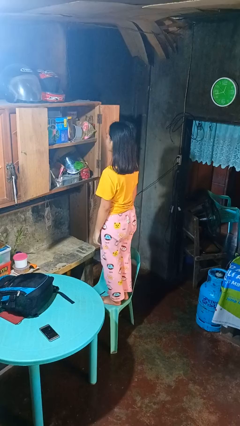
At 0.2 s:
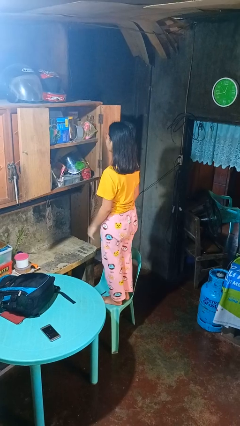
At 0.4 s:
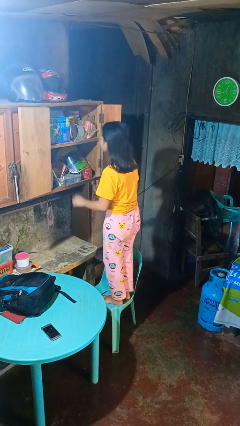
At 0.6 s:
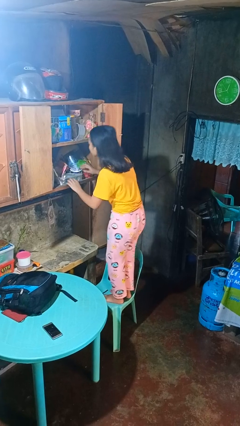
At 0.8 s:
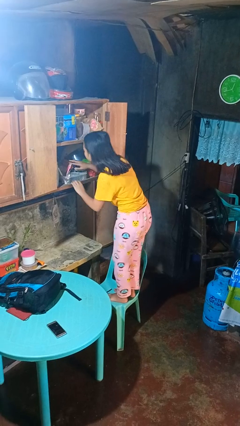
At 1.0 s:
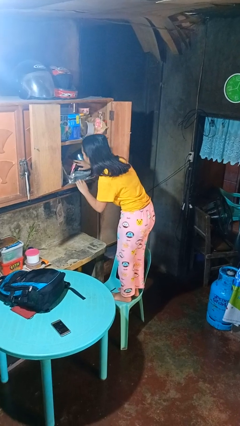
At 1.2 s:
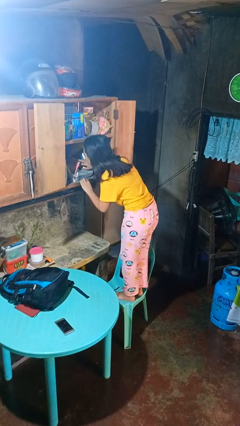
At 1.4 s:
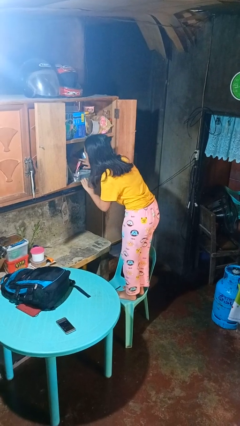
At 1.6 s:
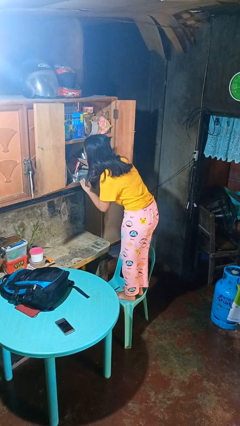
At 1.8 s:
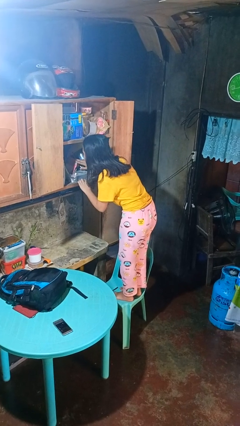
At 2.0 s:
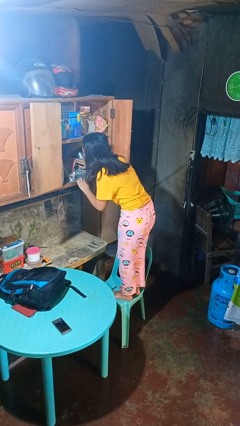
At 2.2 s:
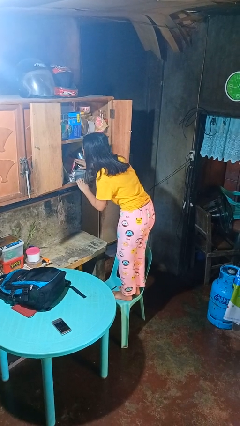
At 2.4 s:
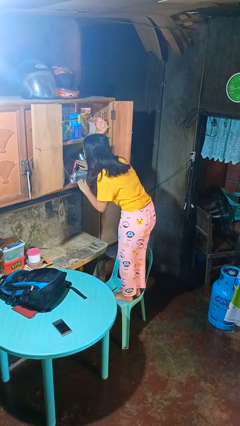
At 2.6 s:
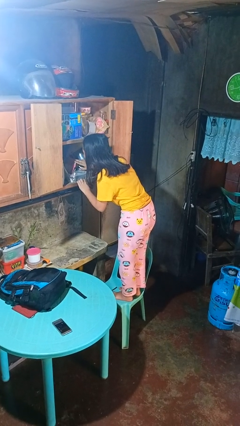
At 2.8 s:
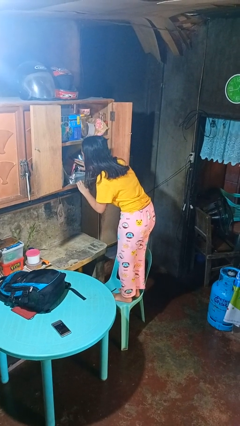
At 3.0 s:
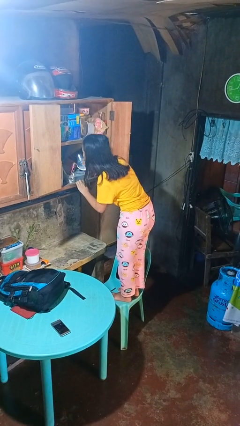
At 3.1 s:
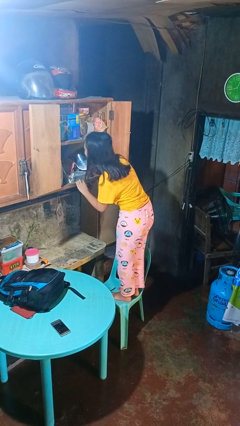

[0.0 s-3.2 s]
person searches in cabinet

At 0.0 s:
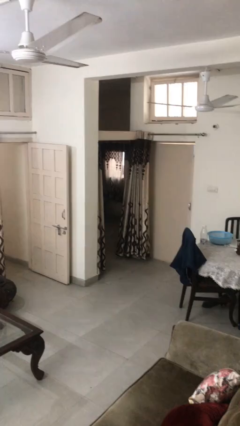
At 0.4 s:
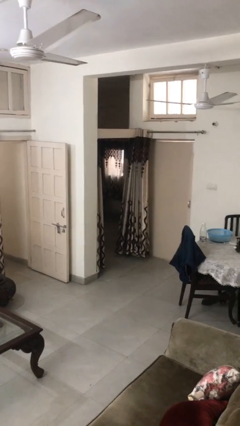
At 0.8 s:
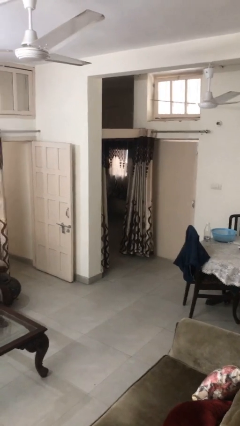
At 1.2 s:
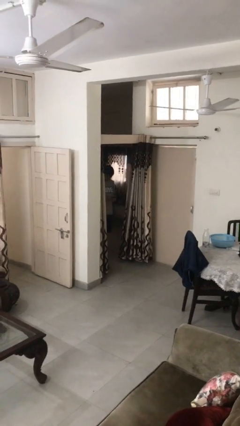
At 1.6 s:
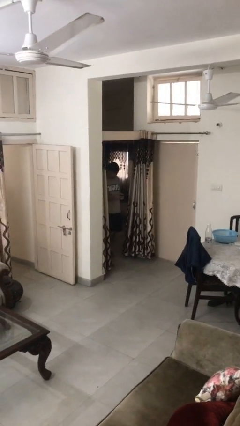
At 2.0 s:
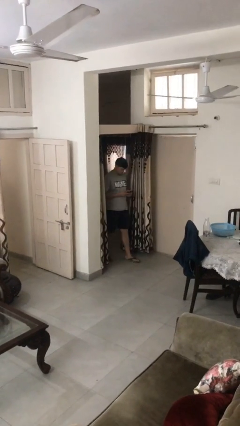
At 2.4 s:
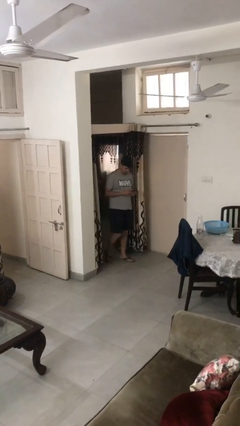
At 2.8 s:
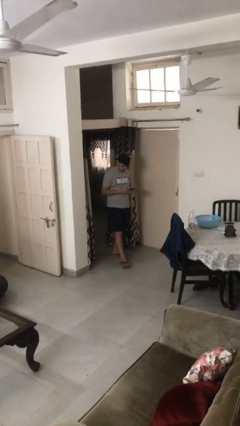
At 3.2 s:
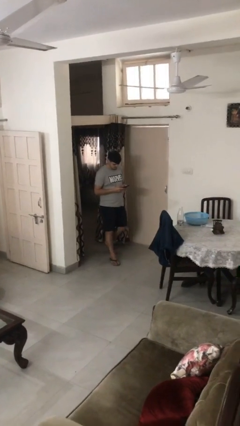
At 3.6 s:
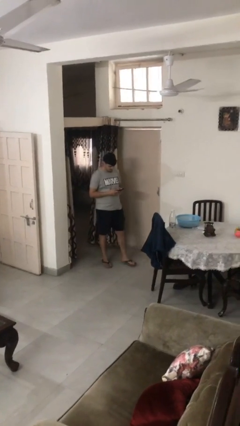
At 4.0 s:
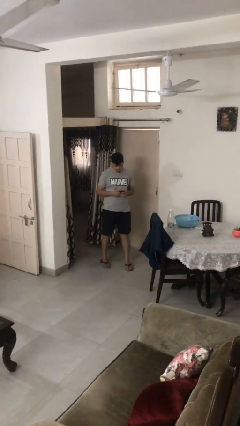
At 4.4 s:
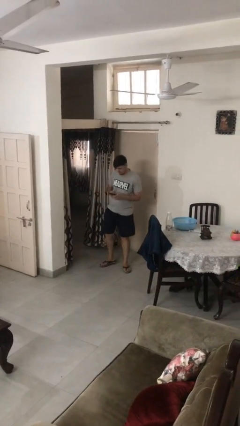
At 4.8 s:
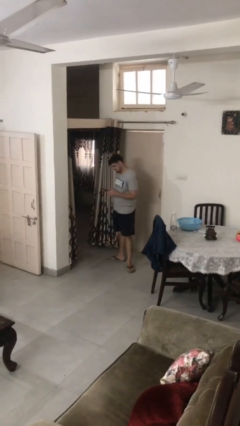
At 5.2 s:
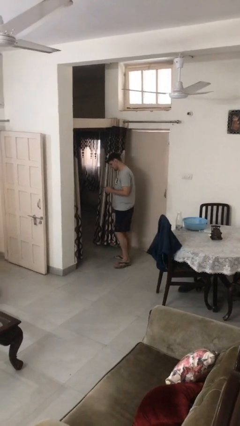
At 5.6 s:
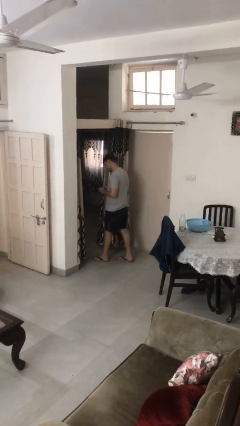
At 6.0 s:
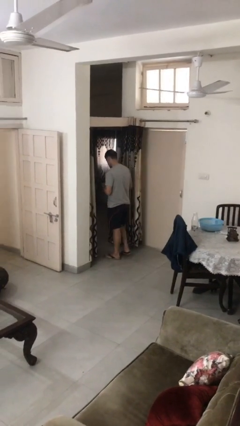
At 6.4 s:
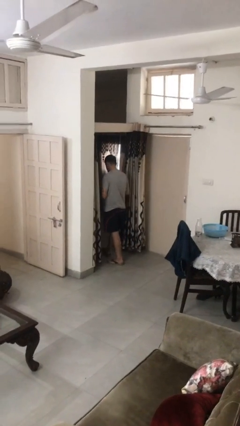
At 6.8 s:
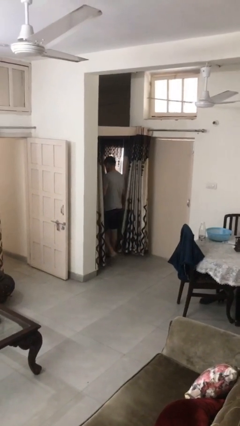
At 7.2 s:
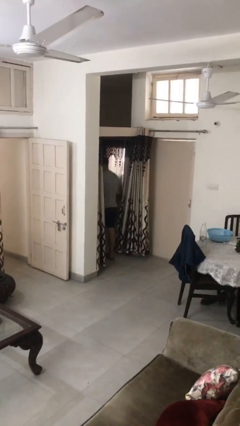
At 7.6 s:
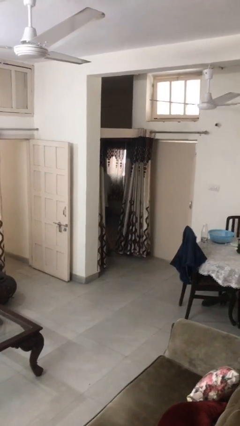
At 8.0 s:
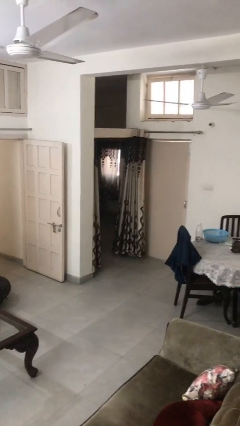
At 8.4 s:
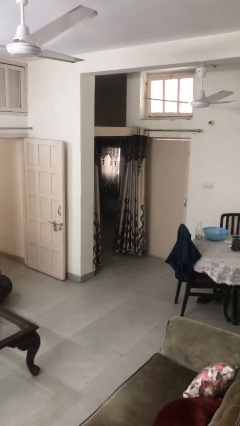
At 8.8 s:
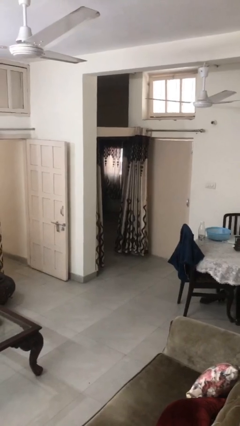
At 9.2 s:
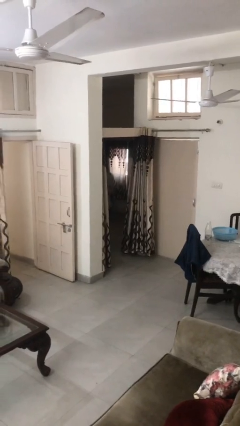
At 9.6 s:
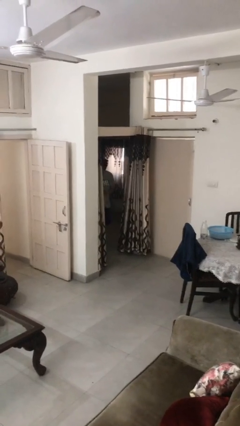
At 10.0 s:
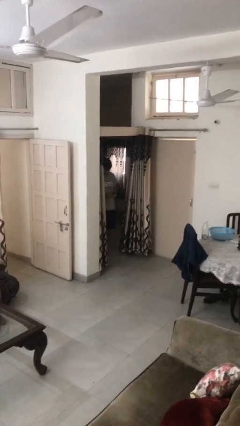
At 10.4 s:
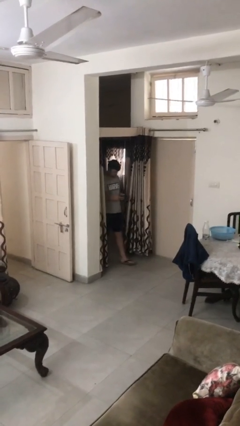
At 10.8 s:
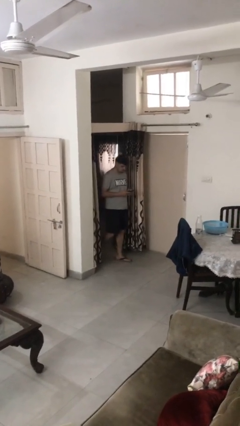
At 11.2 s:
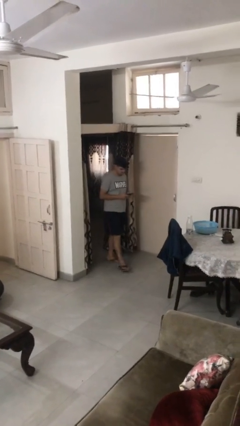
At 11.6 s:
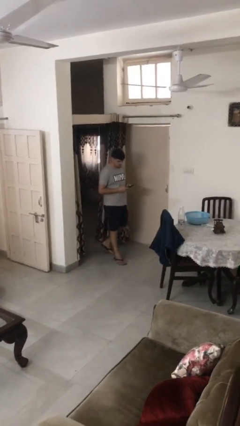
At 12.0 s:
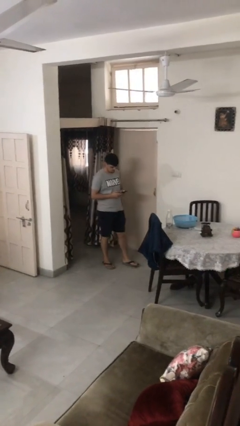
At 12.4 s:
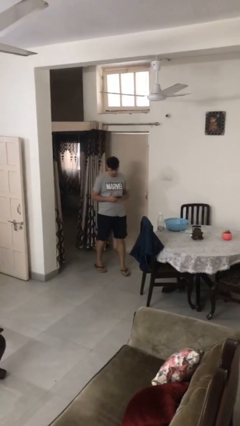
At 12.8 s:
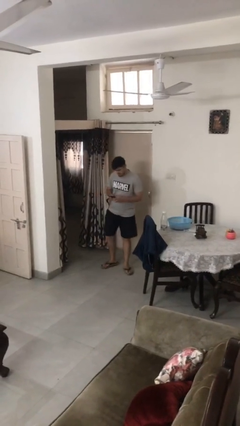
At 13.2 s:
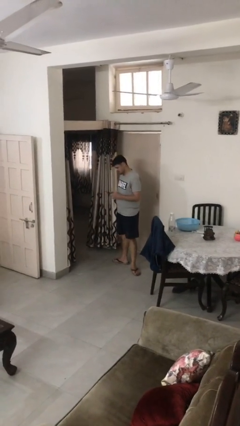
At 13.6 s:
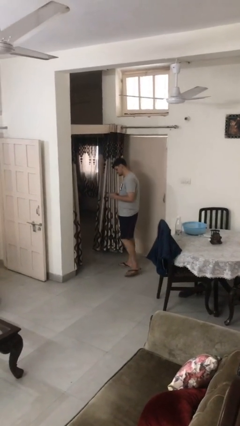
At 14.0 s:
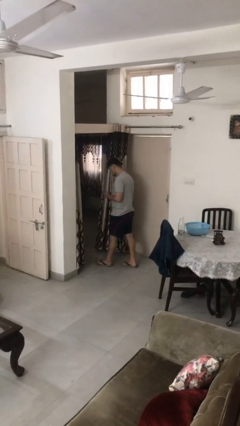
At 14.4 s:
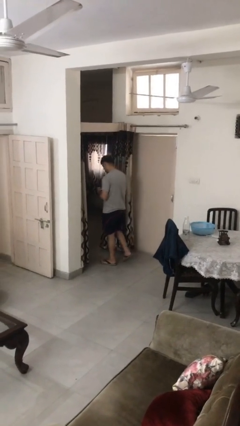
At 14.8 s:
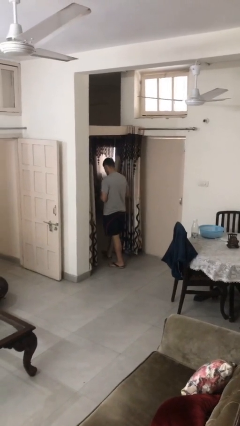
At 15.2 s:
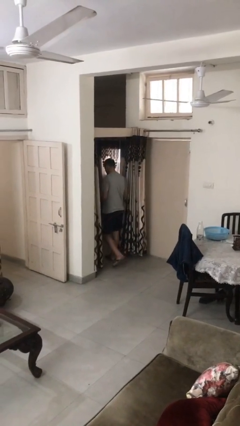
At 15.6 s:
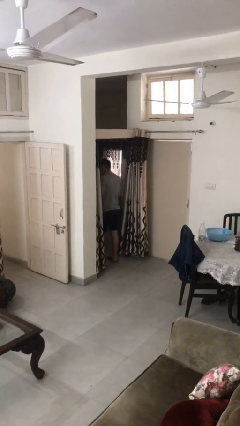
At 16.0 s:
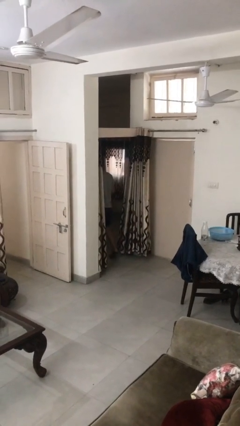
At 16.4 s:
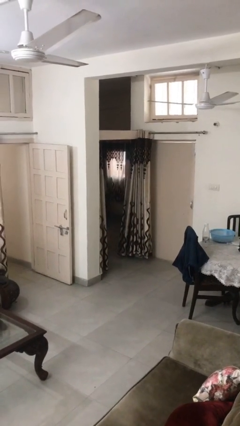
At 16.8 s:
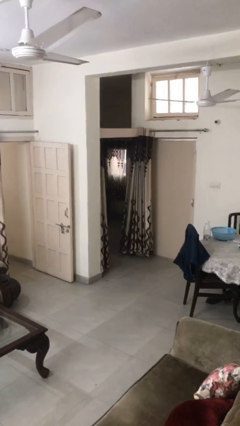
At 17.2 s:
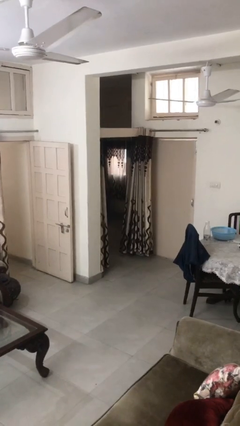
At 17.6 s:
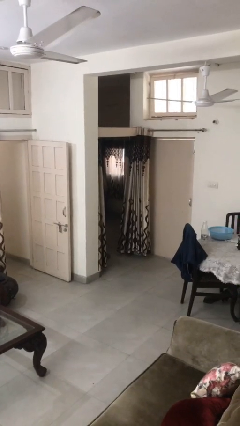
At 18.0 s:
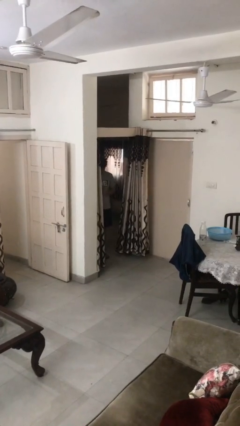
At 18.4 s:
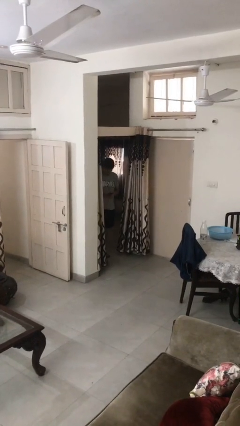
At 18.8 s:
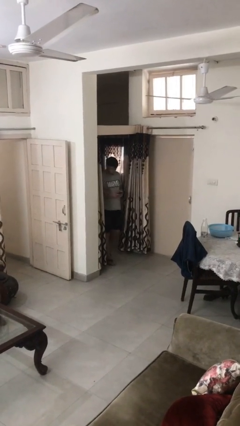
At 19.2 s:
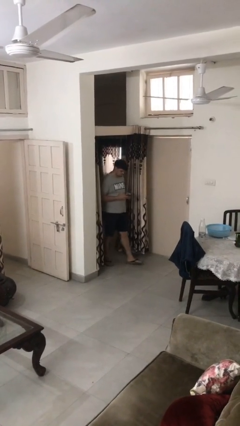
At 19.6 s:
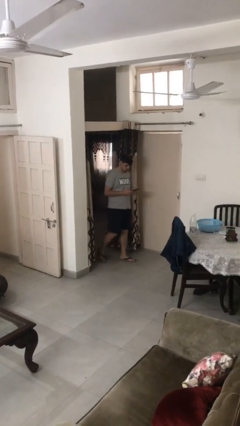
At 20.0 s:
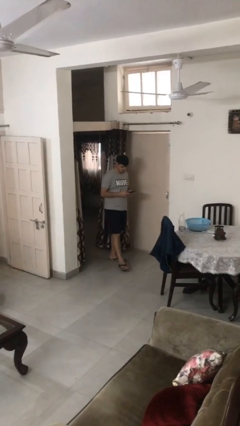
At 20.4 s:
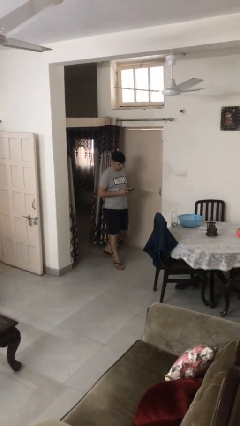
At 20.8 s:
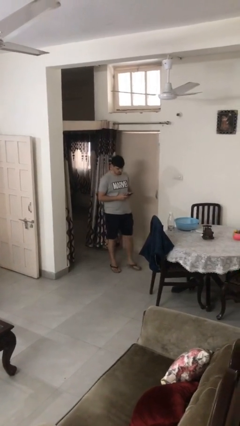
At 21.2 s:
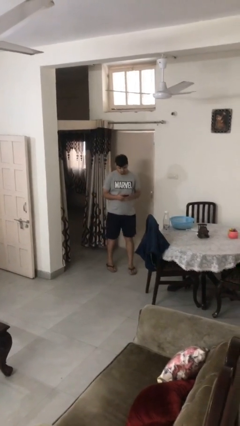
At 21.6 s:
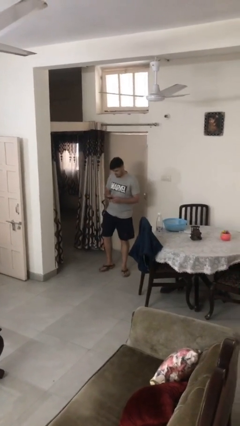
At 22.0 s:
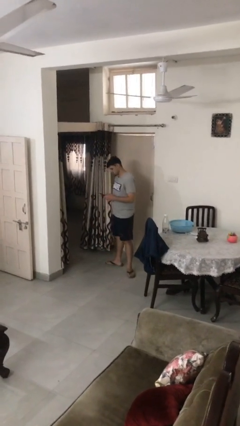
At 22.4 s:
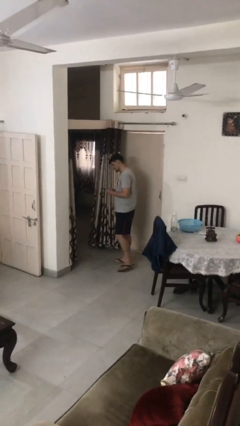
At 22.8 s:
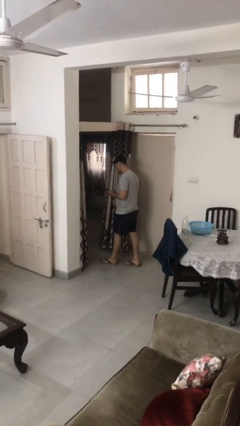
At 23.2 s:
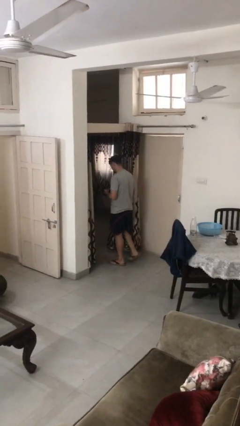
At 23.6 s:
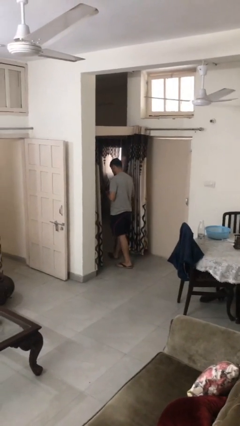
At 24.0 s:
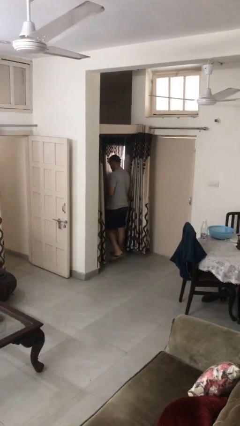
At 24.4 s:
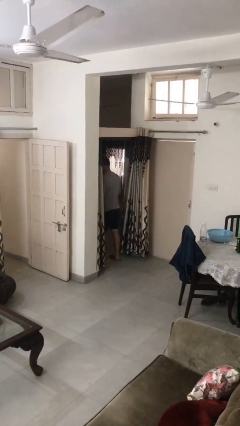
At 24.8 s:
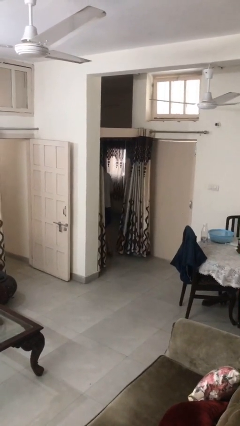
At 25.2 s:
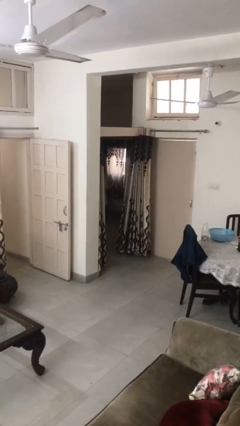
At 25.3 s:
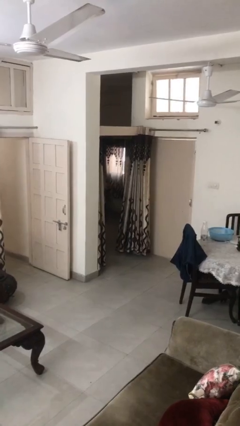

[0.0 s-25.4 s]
person texts on phone

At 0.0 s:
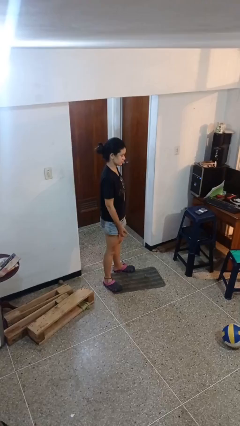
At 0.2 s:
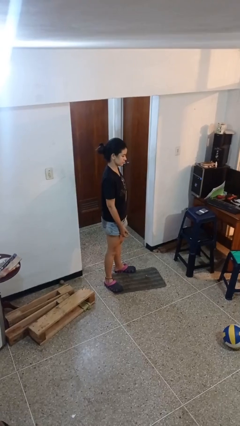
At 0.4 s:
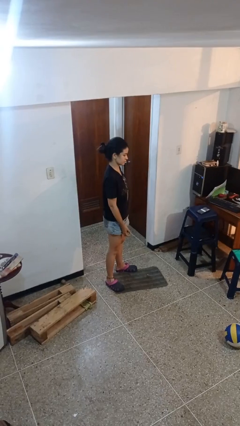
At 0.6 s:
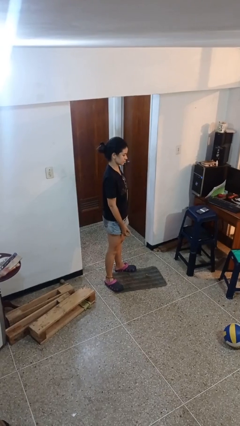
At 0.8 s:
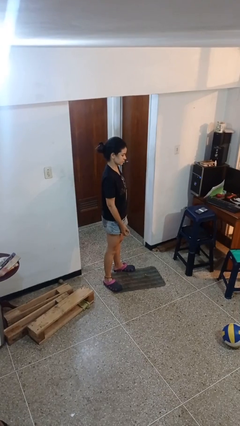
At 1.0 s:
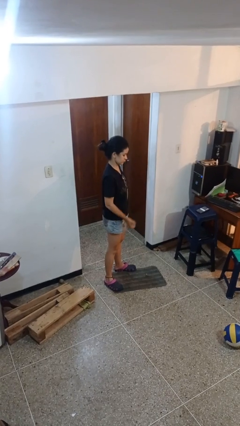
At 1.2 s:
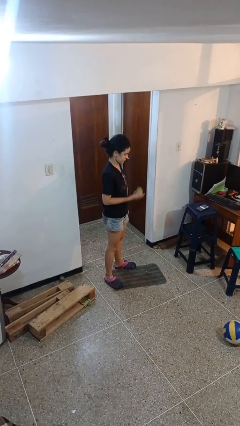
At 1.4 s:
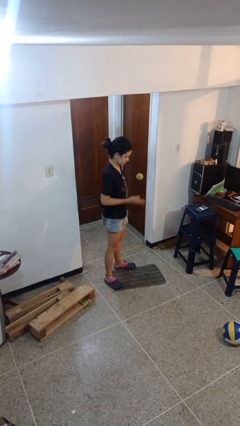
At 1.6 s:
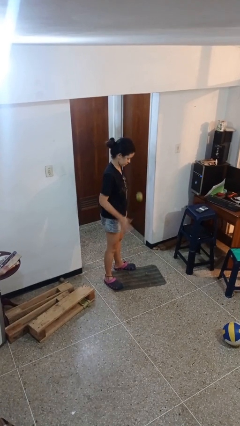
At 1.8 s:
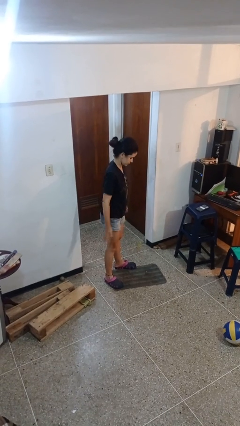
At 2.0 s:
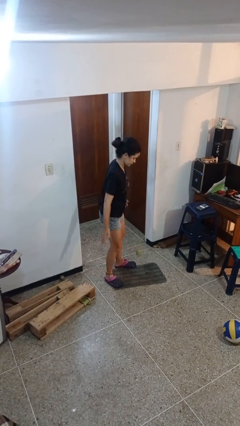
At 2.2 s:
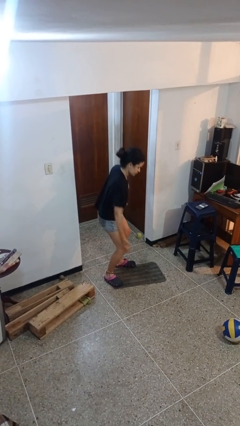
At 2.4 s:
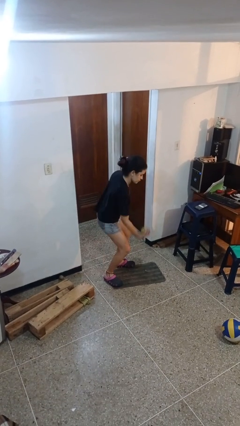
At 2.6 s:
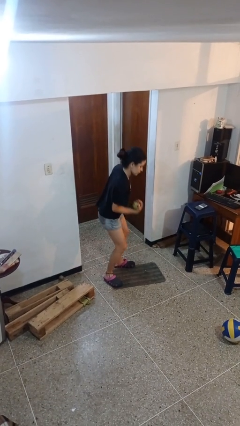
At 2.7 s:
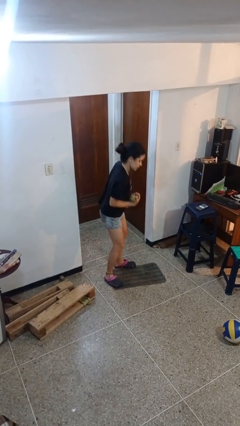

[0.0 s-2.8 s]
person bounces ball on floor
